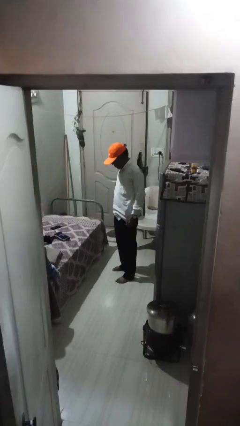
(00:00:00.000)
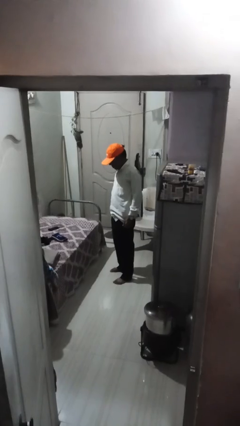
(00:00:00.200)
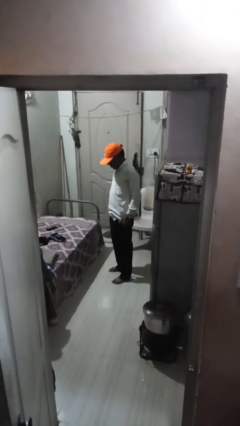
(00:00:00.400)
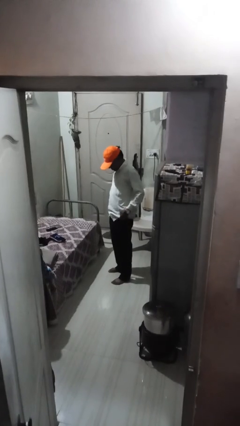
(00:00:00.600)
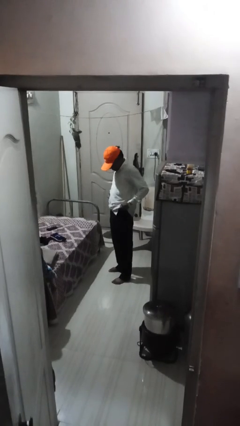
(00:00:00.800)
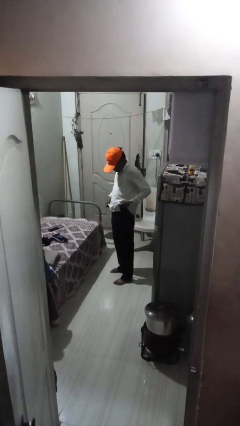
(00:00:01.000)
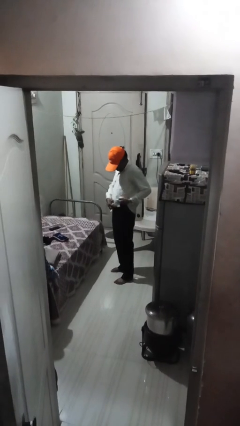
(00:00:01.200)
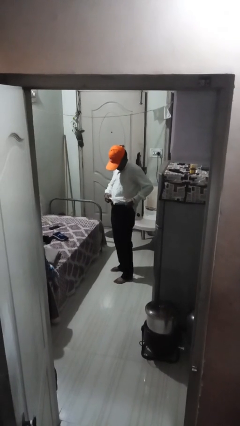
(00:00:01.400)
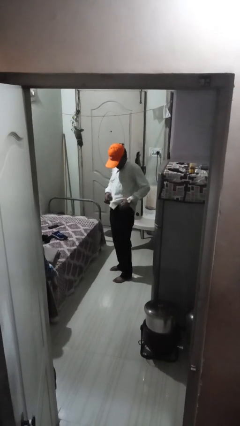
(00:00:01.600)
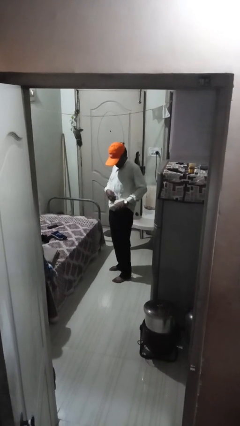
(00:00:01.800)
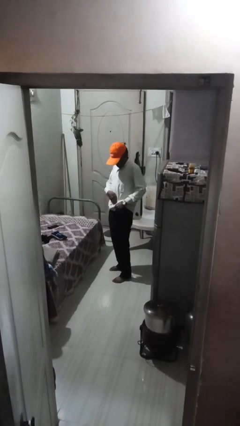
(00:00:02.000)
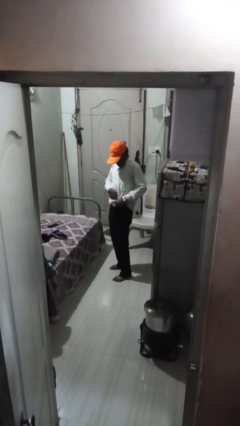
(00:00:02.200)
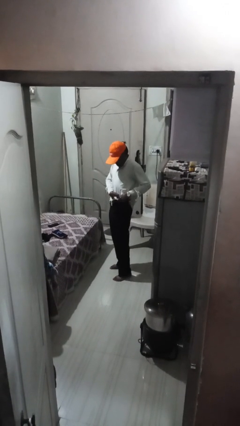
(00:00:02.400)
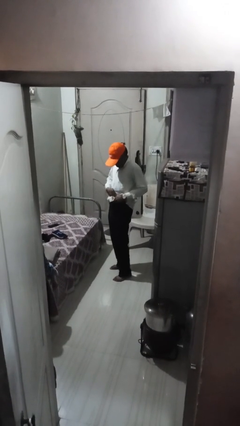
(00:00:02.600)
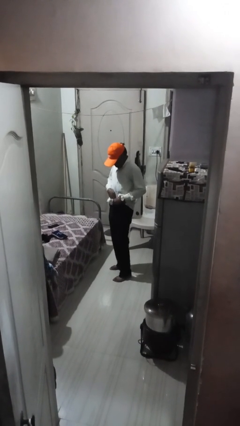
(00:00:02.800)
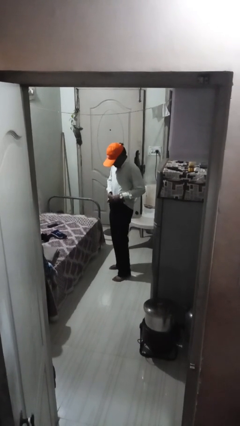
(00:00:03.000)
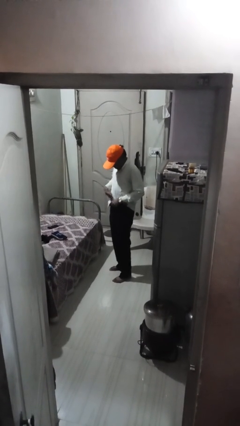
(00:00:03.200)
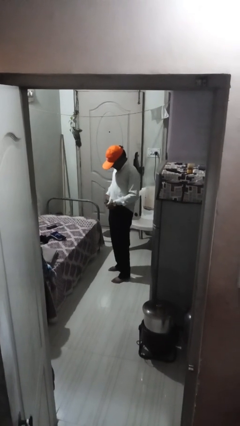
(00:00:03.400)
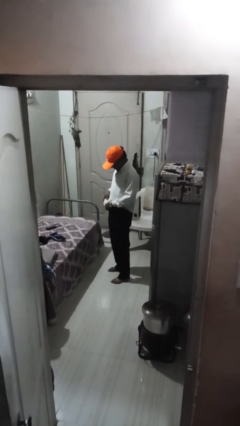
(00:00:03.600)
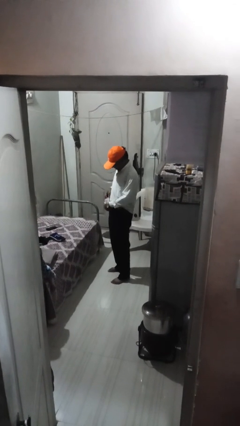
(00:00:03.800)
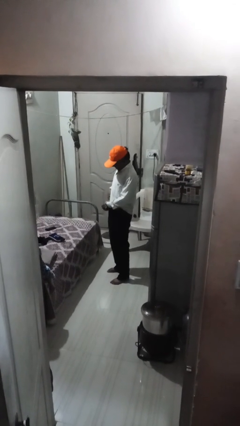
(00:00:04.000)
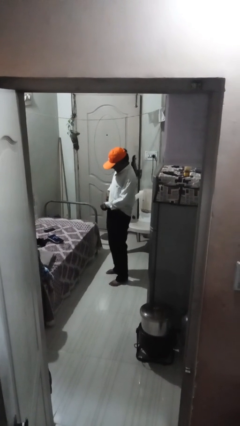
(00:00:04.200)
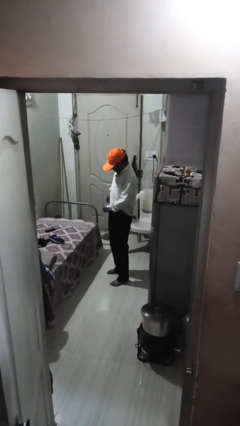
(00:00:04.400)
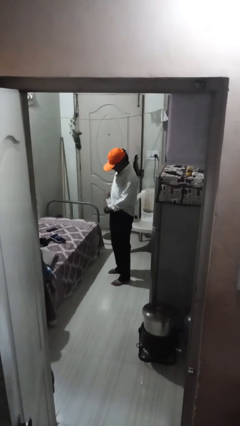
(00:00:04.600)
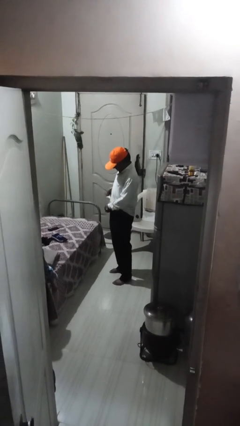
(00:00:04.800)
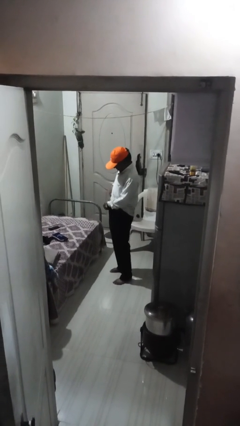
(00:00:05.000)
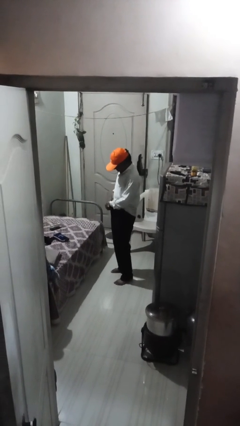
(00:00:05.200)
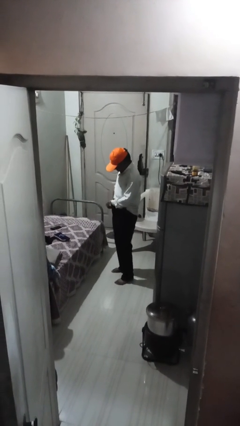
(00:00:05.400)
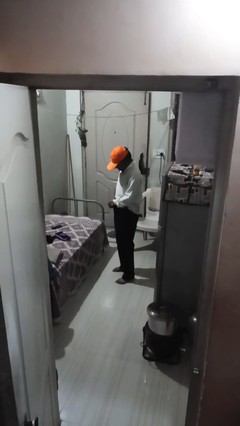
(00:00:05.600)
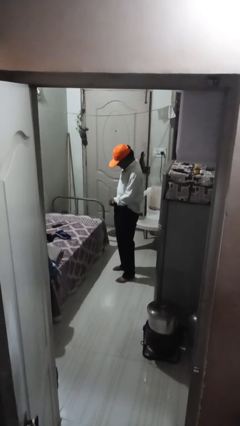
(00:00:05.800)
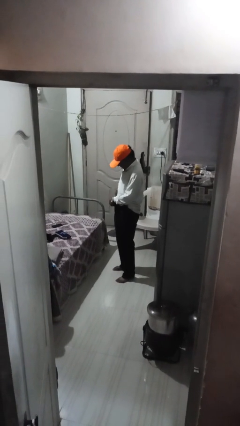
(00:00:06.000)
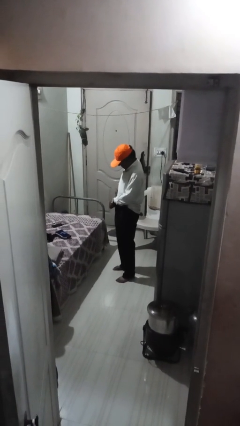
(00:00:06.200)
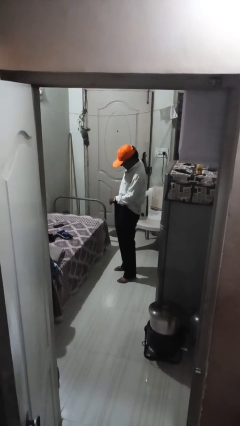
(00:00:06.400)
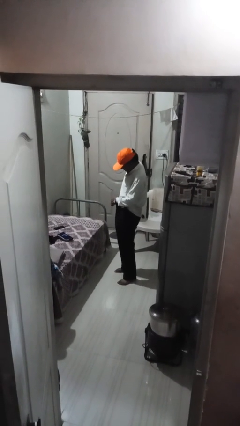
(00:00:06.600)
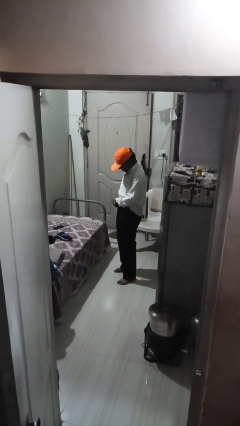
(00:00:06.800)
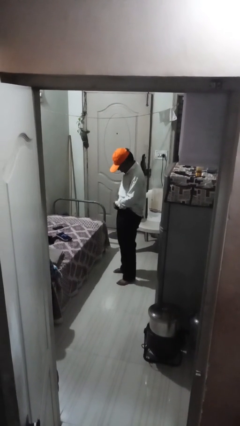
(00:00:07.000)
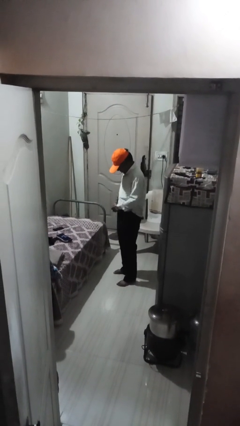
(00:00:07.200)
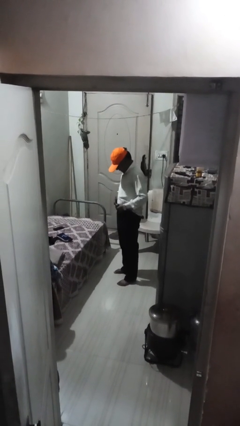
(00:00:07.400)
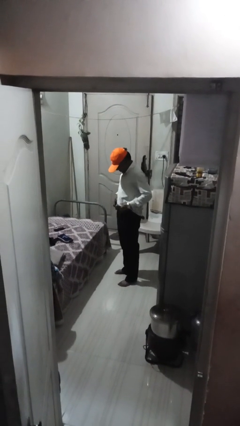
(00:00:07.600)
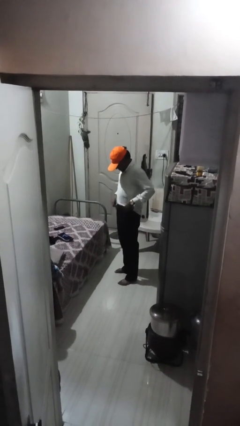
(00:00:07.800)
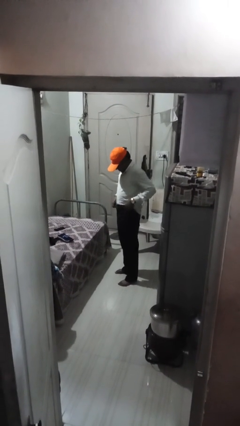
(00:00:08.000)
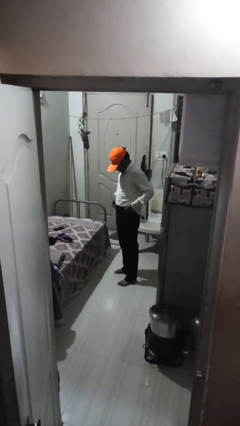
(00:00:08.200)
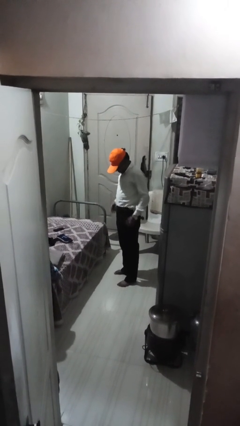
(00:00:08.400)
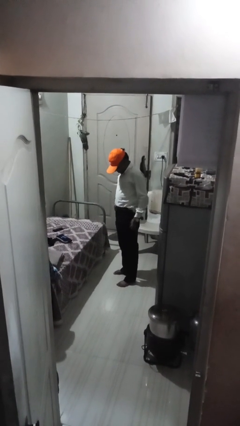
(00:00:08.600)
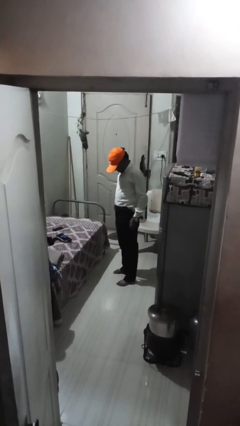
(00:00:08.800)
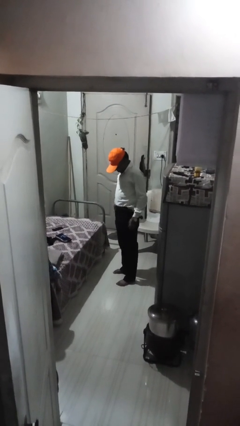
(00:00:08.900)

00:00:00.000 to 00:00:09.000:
person tucks in shirt

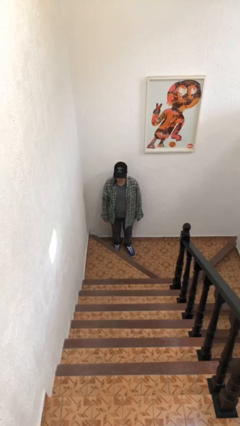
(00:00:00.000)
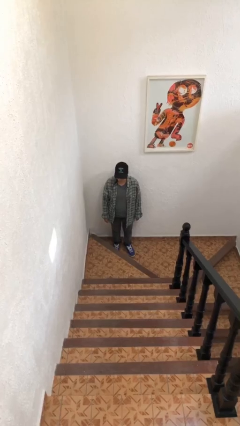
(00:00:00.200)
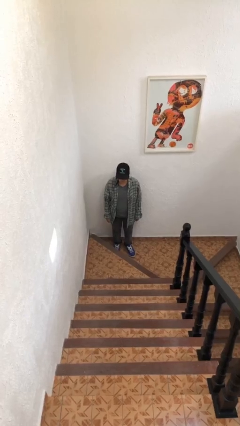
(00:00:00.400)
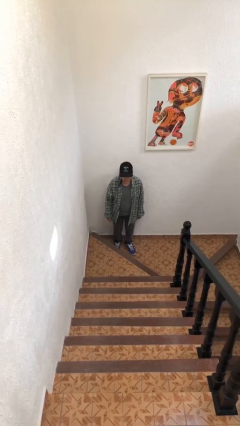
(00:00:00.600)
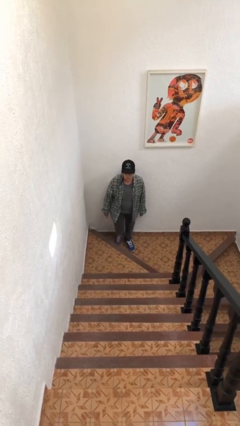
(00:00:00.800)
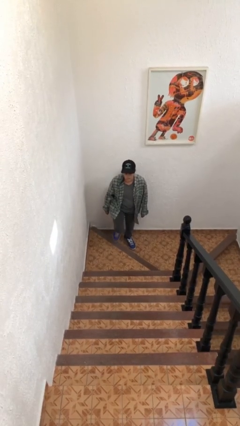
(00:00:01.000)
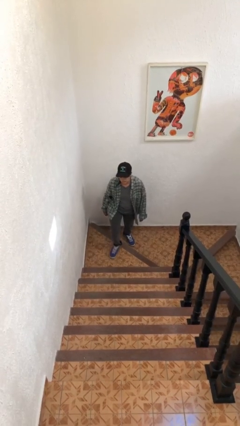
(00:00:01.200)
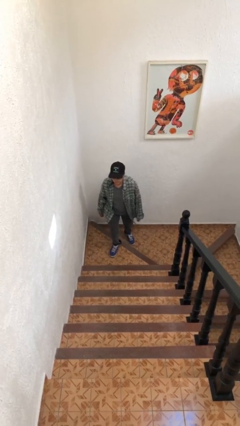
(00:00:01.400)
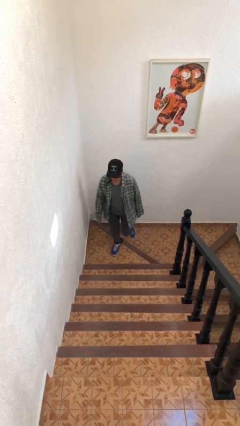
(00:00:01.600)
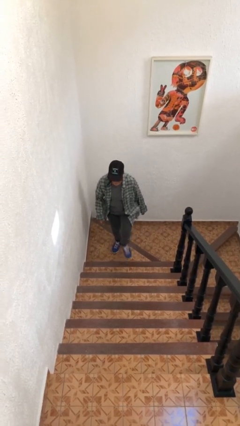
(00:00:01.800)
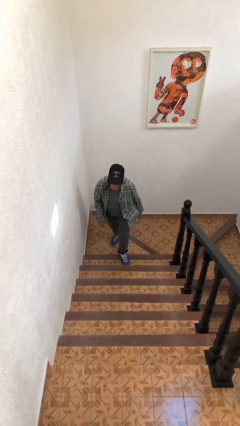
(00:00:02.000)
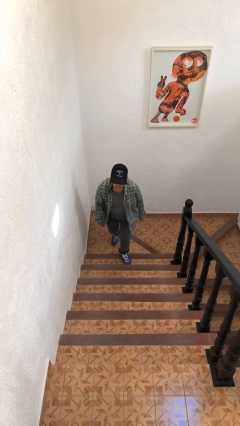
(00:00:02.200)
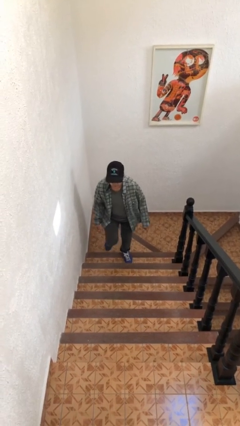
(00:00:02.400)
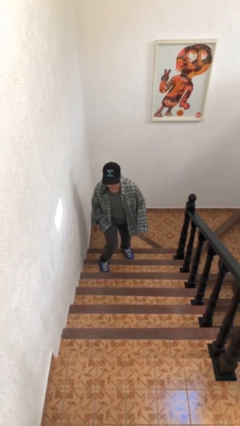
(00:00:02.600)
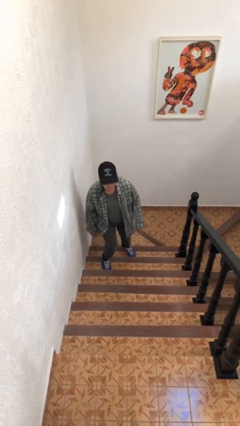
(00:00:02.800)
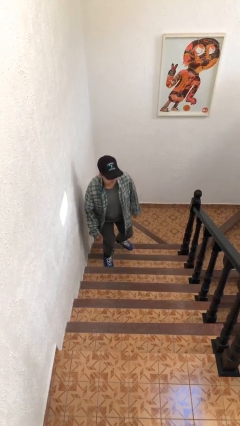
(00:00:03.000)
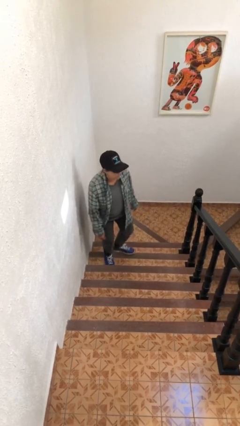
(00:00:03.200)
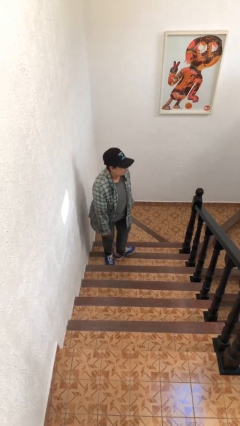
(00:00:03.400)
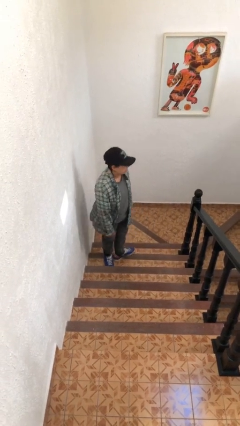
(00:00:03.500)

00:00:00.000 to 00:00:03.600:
person climbs up stairs

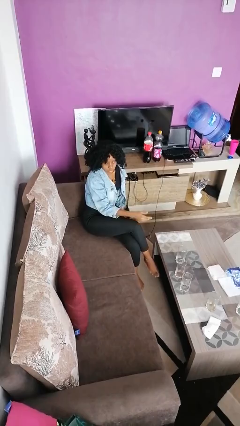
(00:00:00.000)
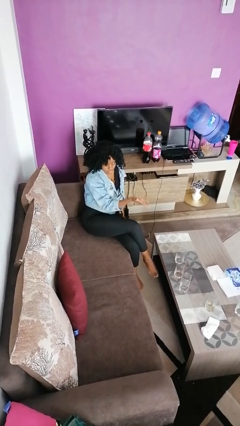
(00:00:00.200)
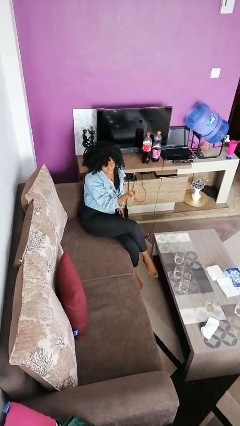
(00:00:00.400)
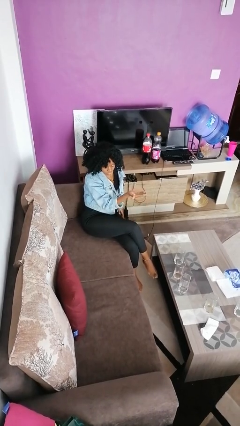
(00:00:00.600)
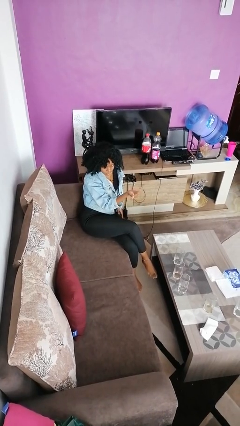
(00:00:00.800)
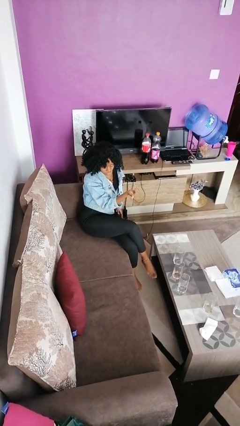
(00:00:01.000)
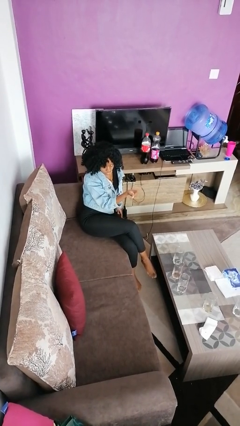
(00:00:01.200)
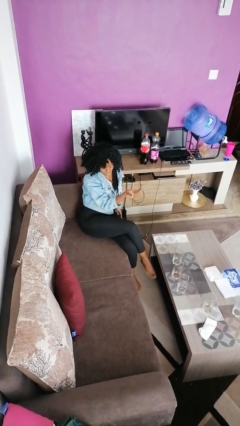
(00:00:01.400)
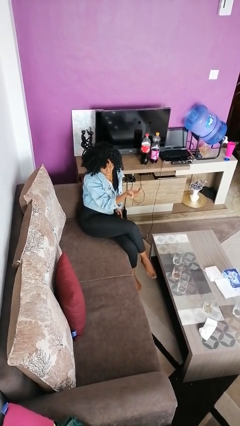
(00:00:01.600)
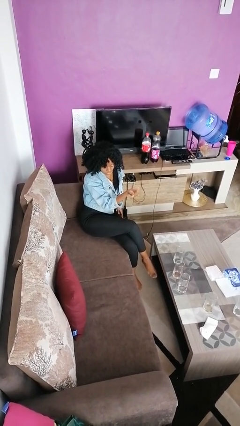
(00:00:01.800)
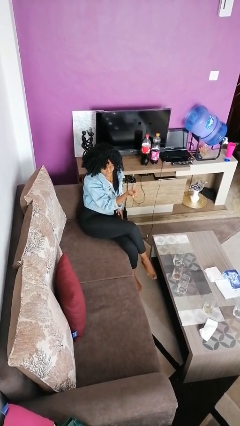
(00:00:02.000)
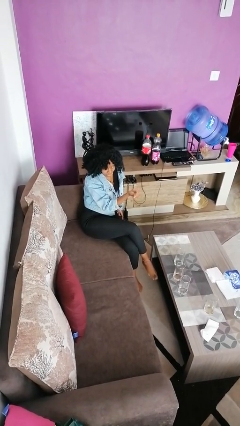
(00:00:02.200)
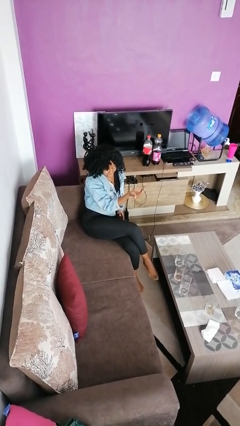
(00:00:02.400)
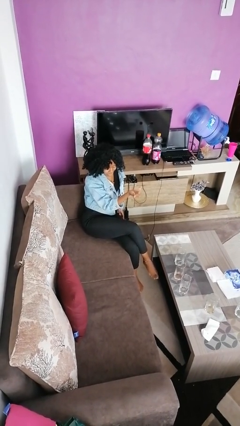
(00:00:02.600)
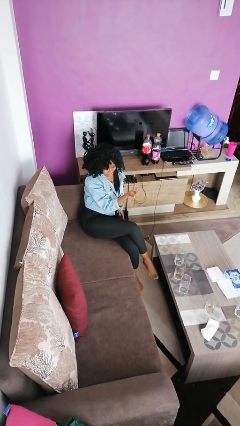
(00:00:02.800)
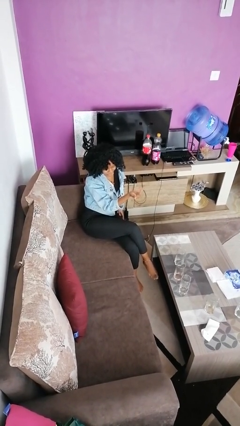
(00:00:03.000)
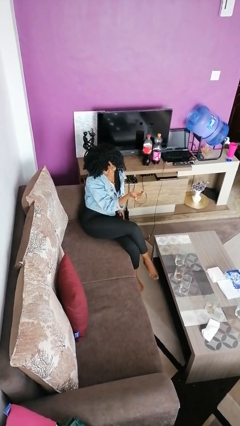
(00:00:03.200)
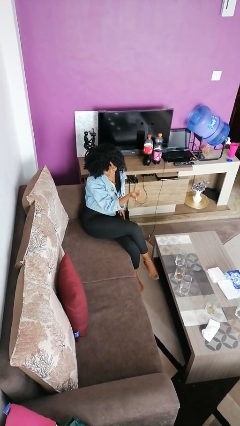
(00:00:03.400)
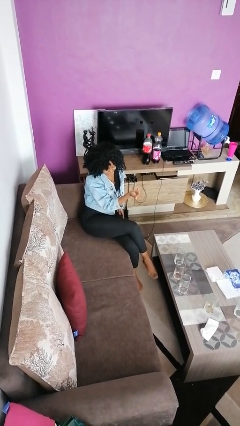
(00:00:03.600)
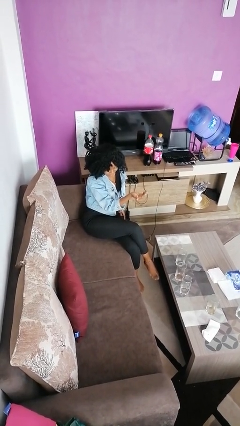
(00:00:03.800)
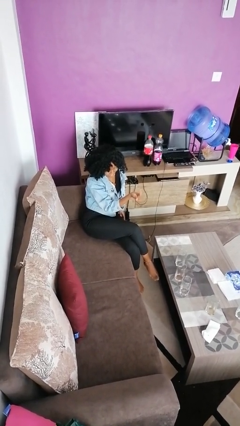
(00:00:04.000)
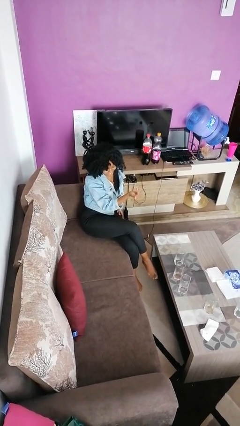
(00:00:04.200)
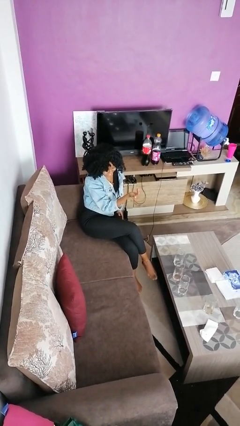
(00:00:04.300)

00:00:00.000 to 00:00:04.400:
person gestures come here

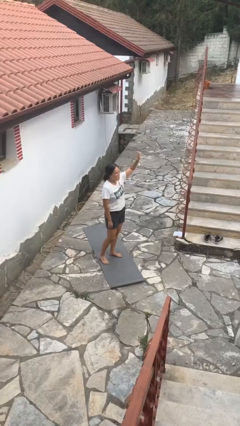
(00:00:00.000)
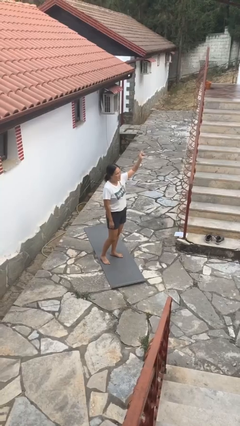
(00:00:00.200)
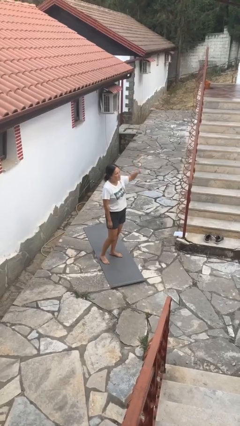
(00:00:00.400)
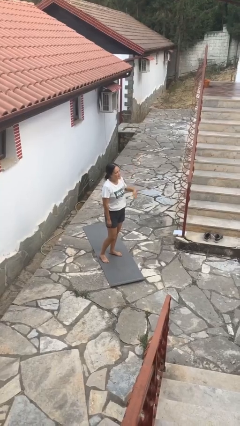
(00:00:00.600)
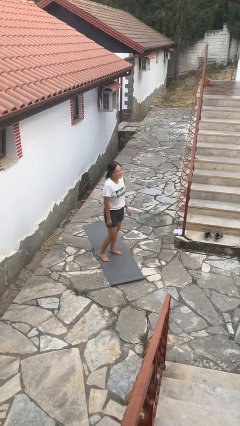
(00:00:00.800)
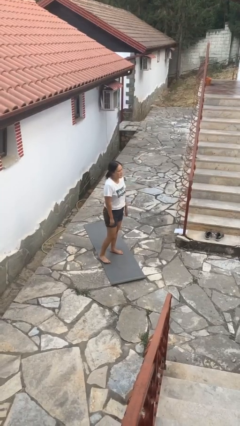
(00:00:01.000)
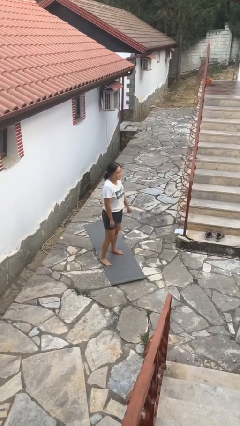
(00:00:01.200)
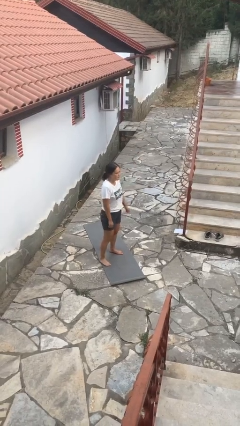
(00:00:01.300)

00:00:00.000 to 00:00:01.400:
person gestures lower hand
